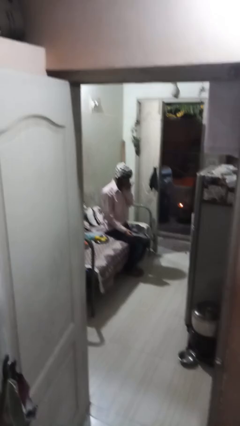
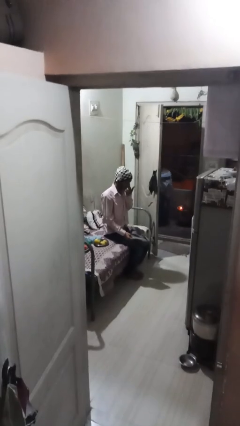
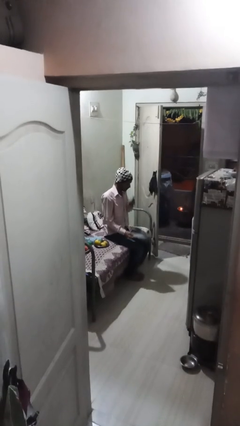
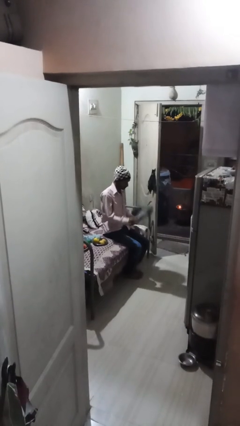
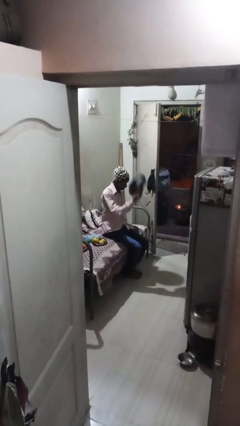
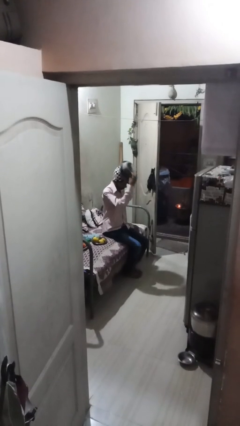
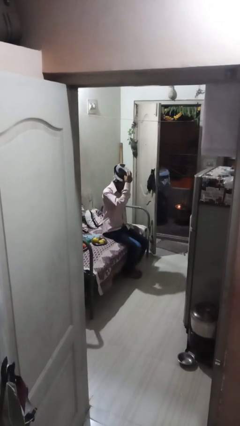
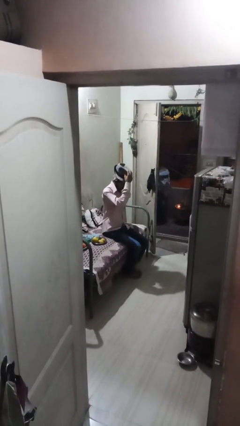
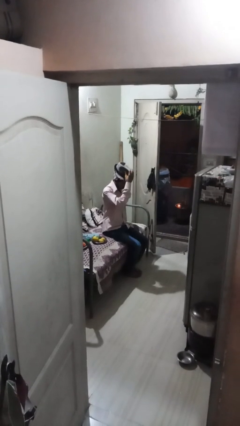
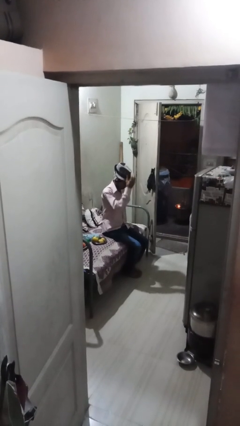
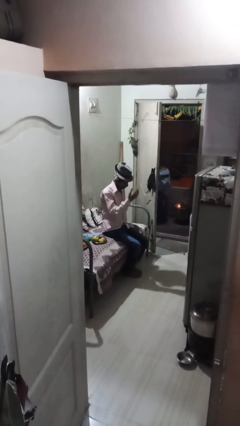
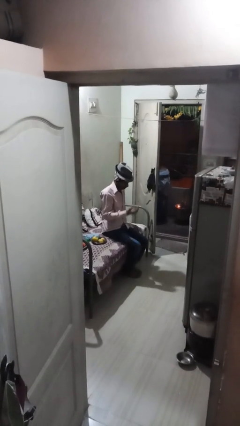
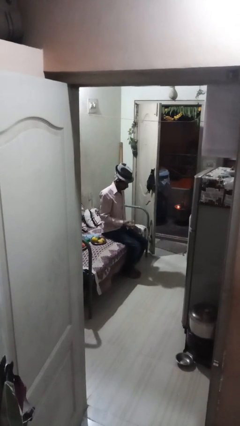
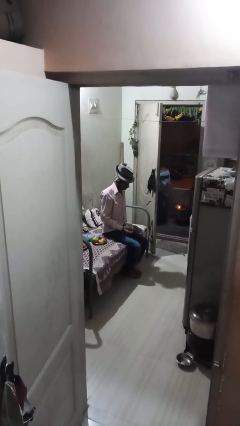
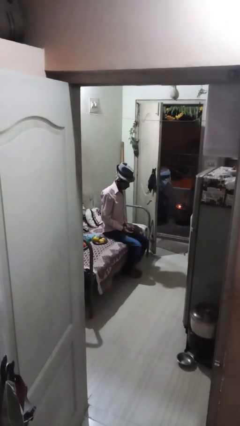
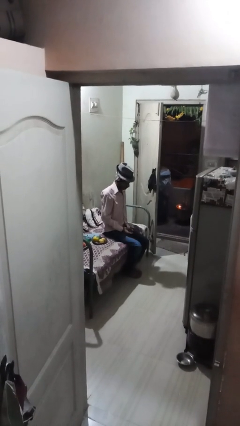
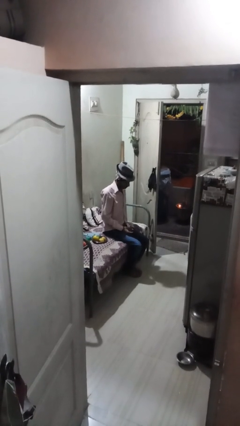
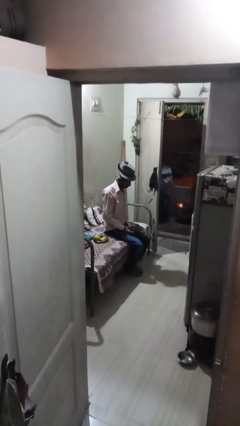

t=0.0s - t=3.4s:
person puts on hat

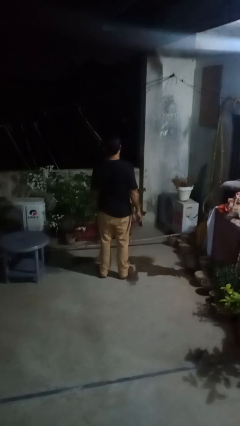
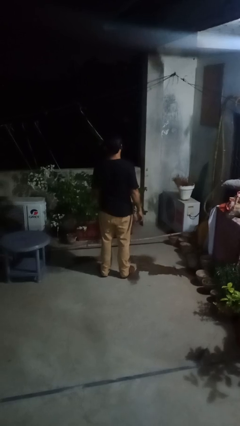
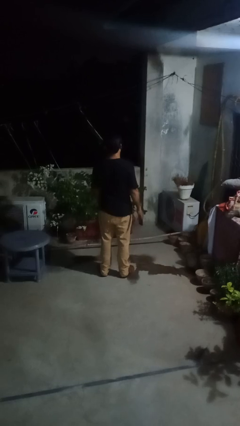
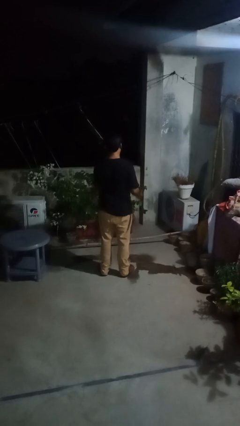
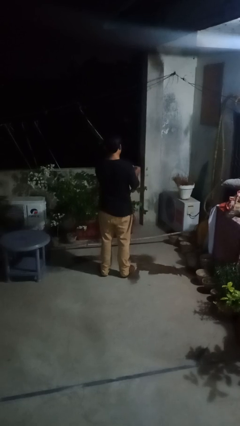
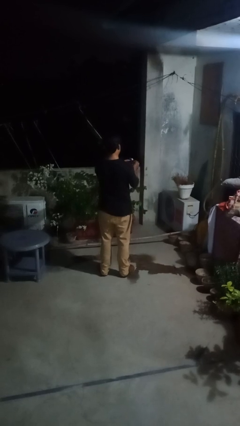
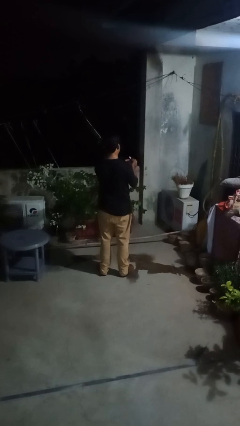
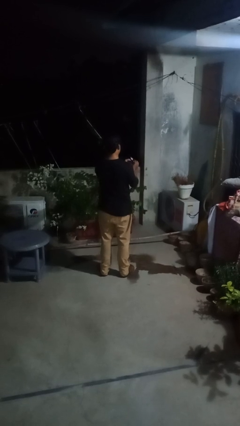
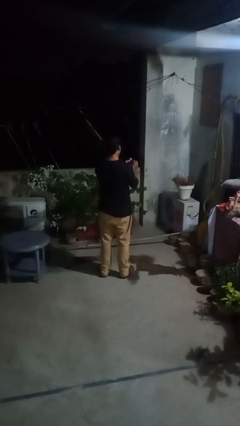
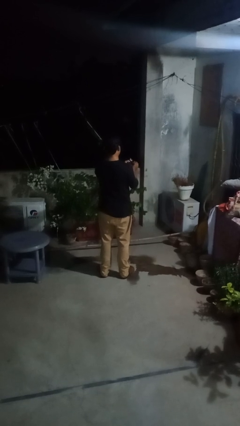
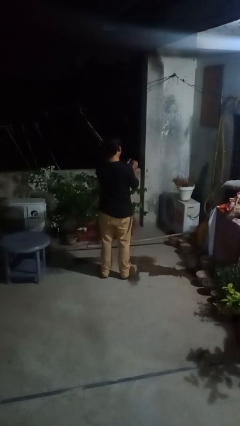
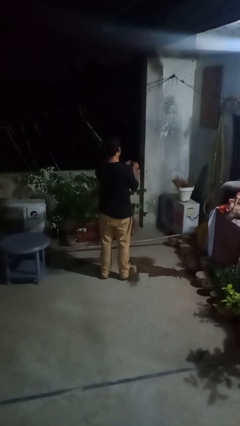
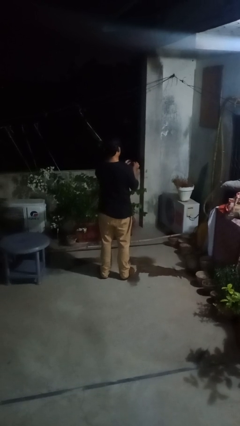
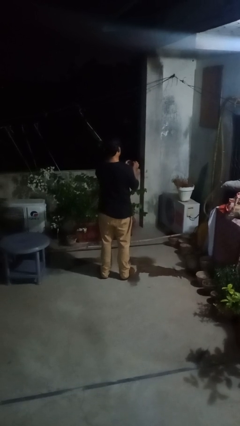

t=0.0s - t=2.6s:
person files fingernails

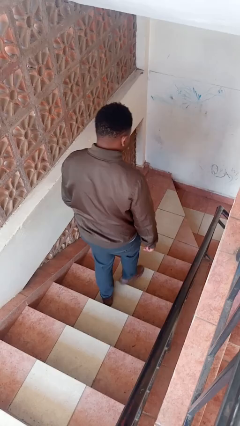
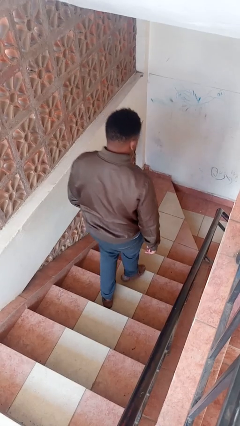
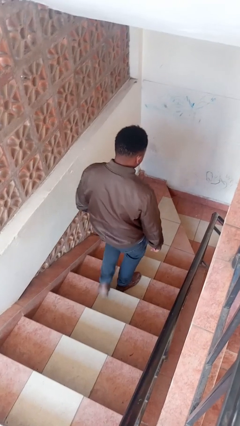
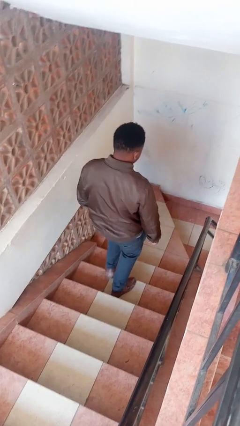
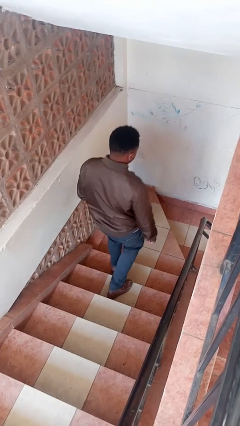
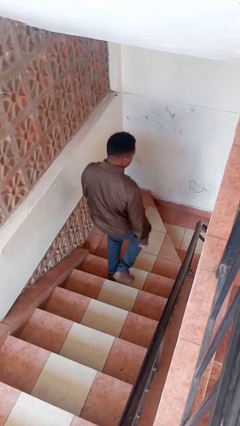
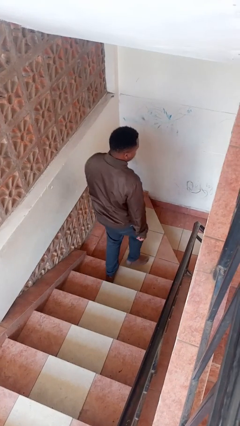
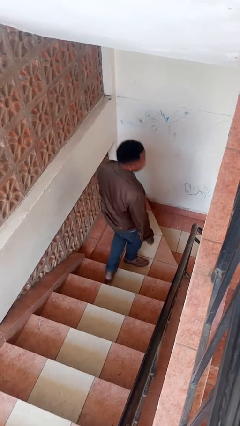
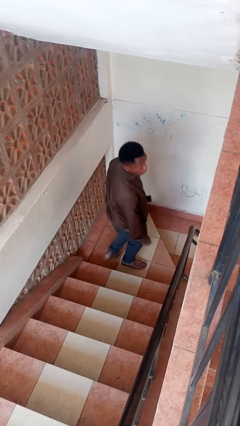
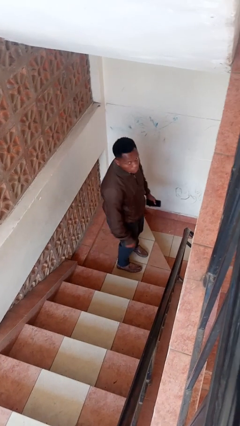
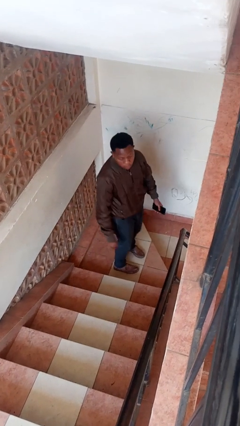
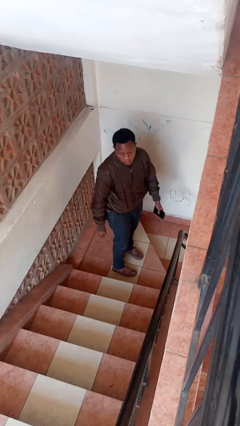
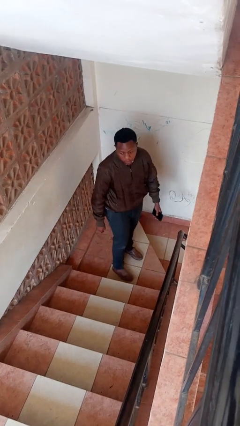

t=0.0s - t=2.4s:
person climbs down stairs

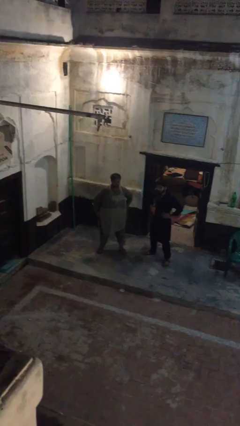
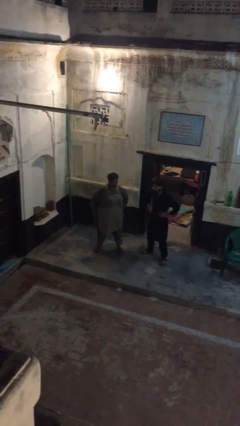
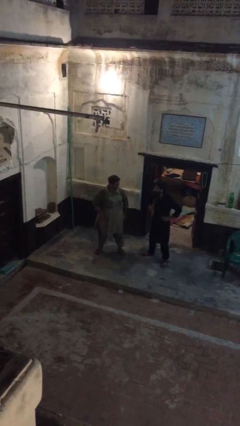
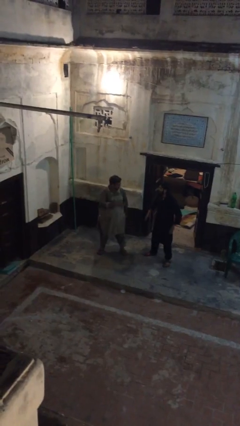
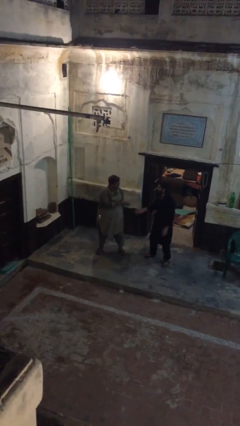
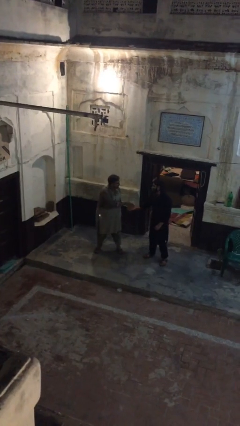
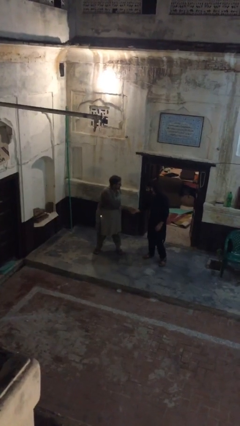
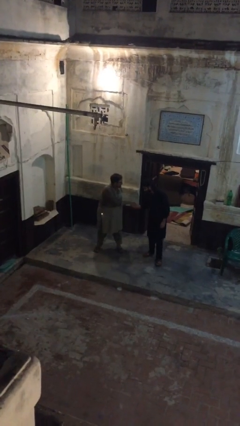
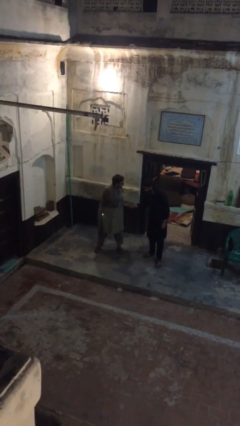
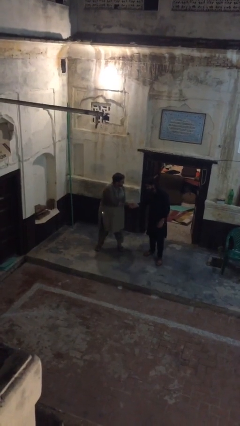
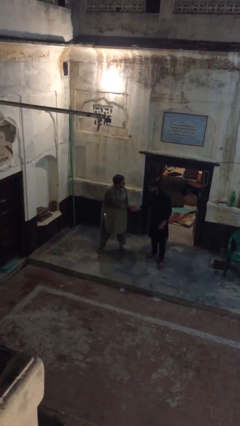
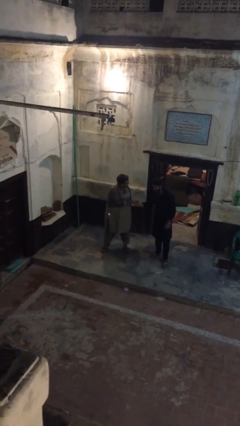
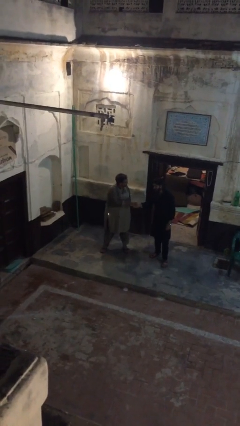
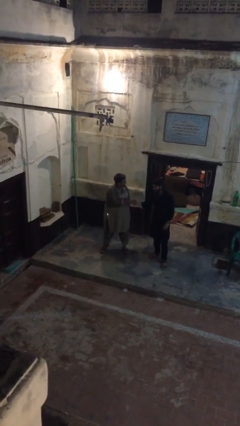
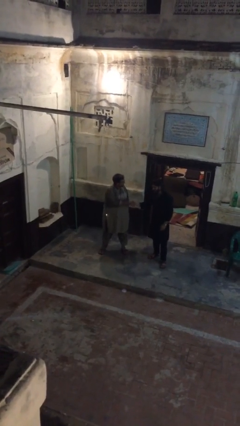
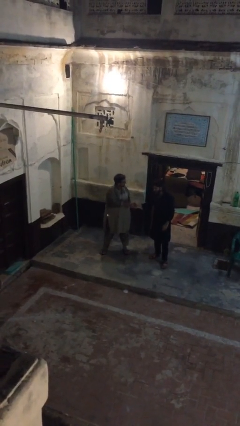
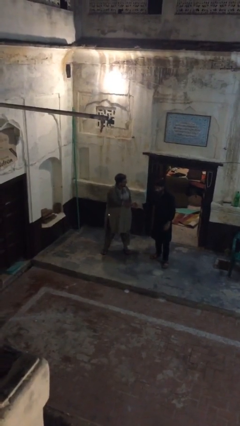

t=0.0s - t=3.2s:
person shakes hand

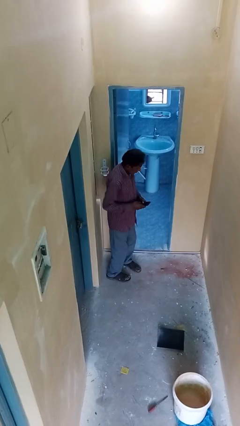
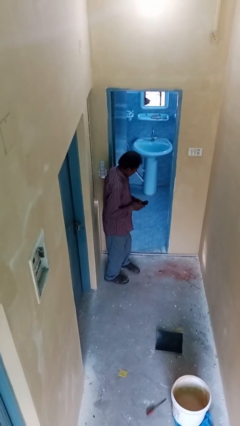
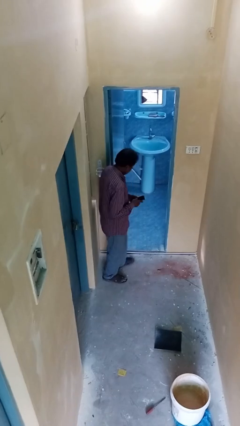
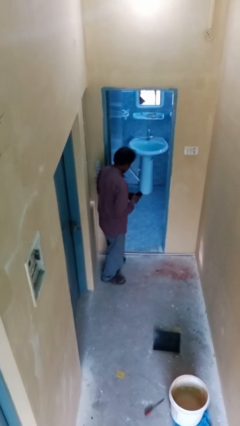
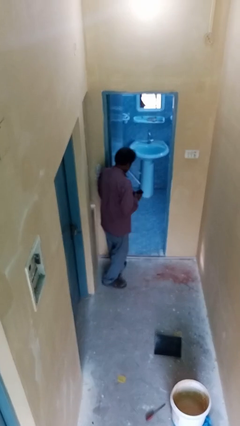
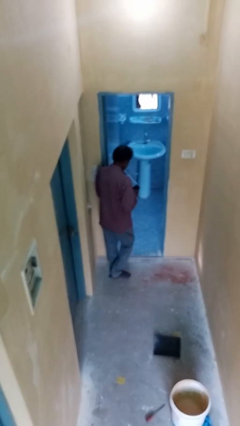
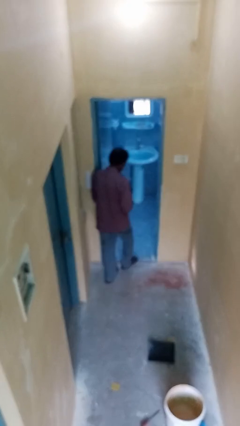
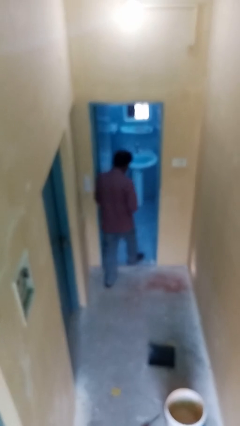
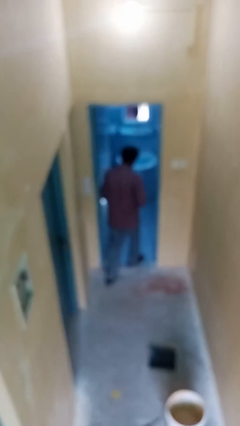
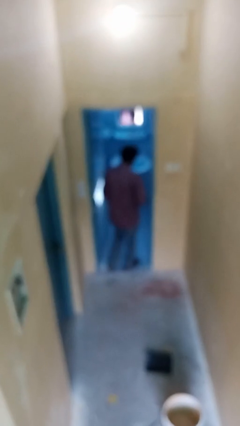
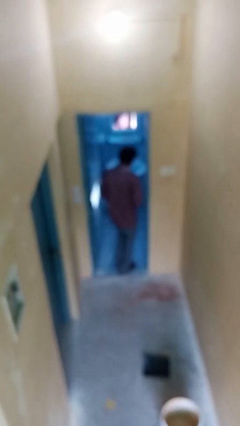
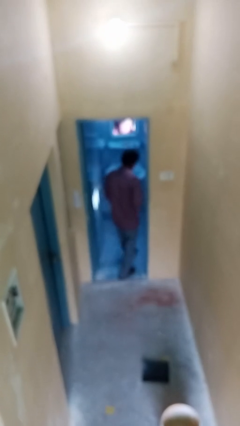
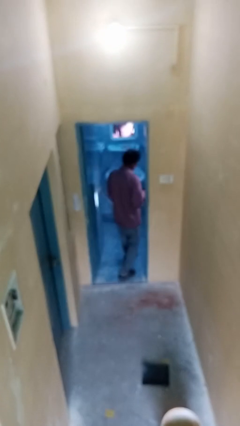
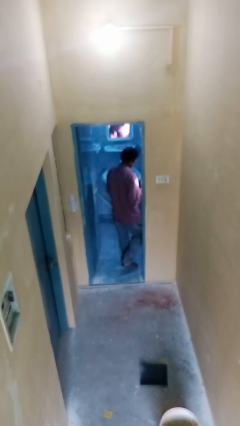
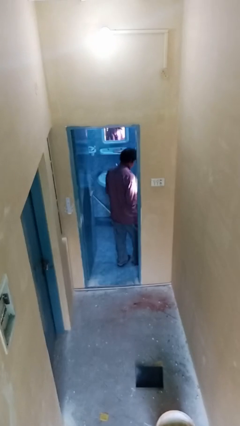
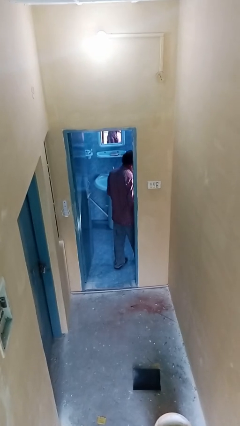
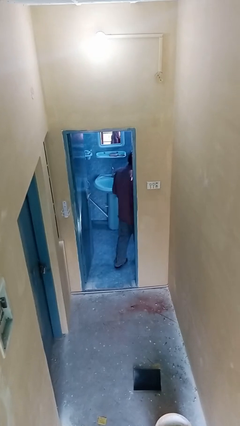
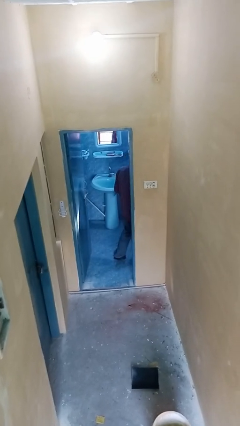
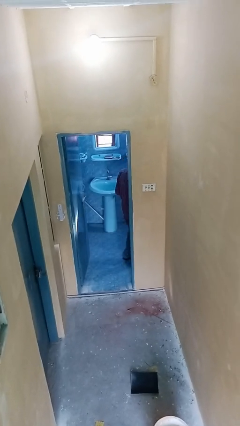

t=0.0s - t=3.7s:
person exits scene through structure

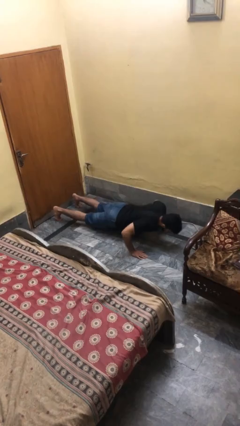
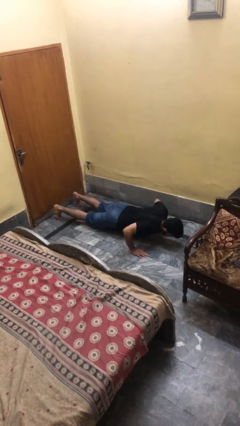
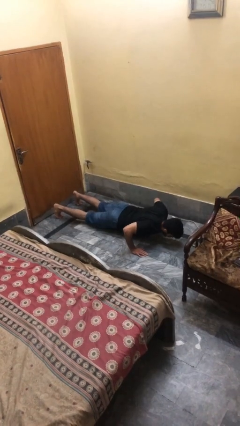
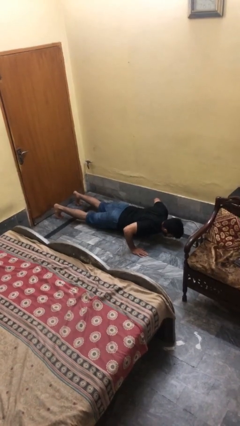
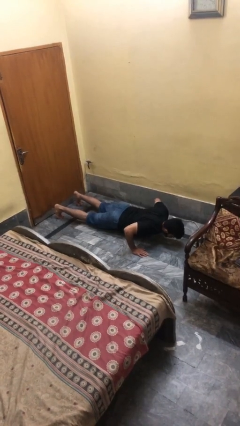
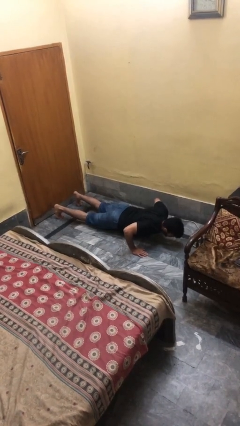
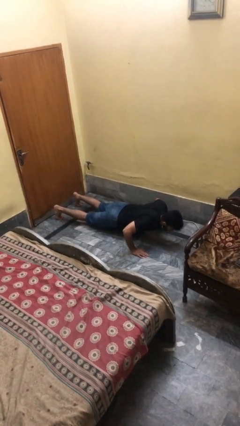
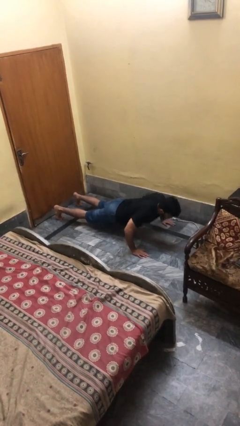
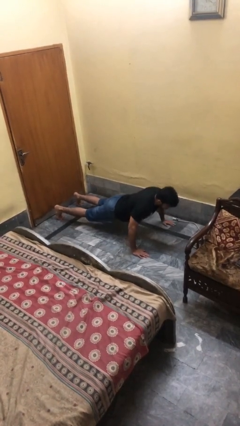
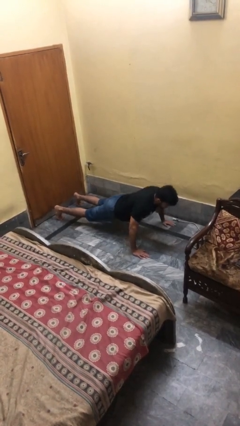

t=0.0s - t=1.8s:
person exercises with pushup
